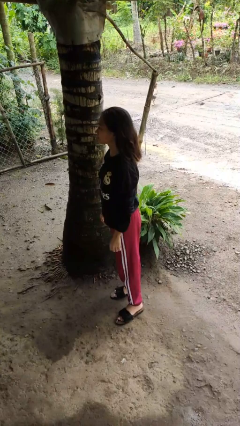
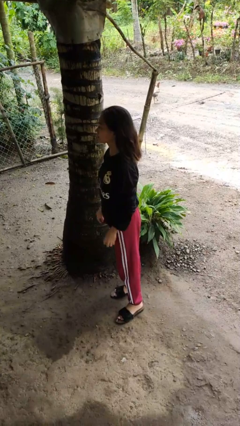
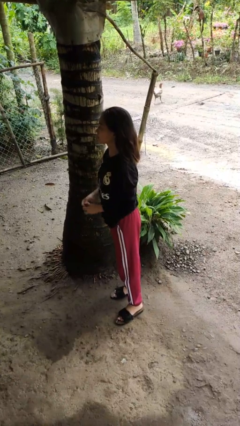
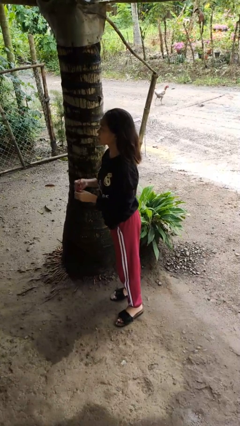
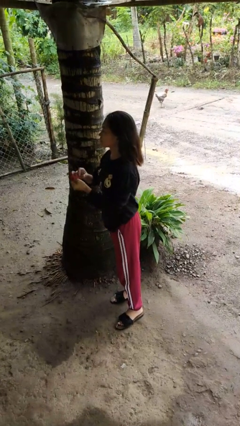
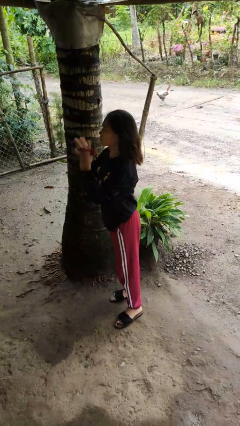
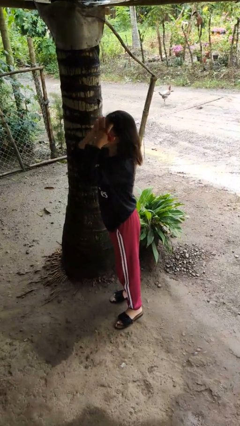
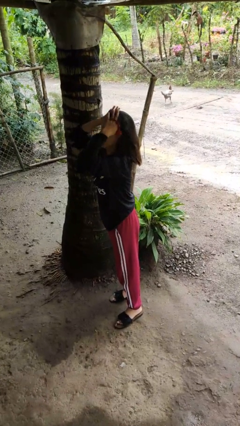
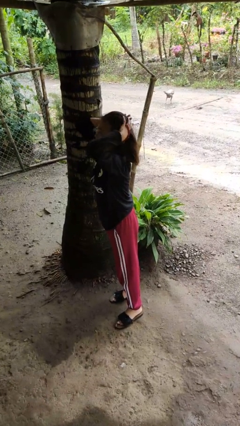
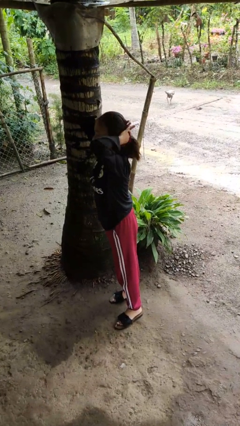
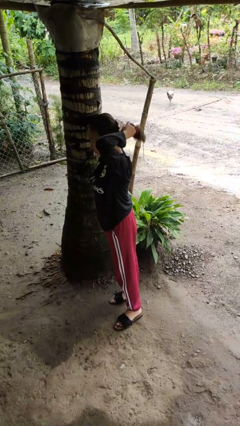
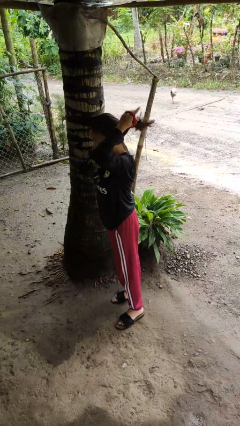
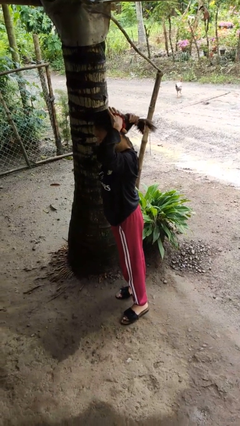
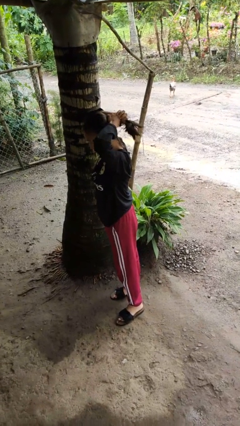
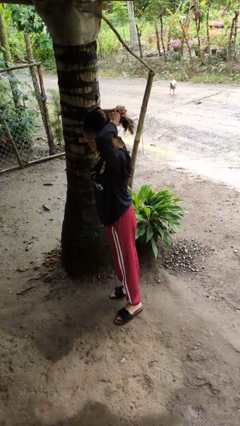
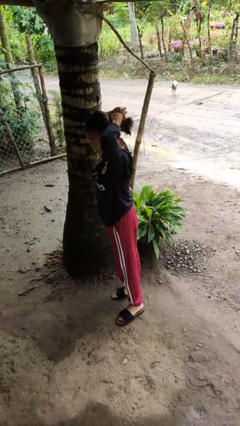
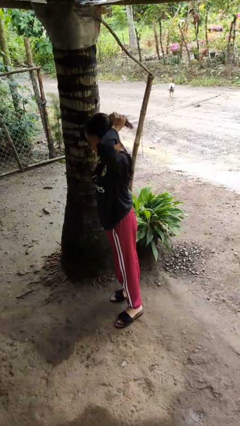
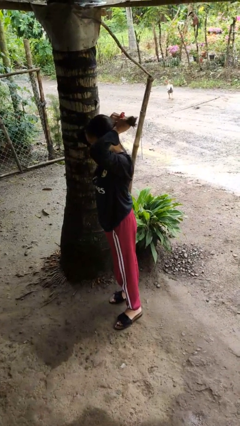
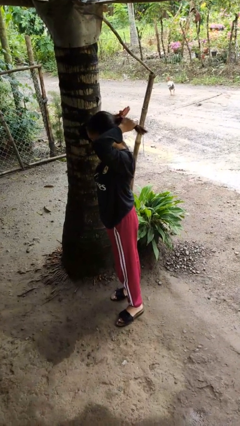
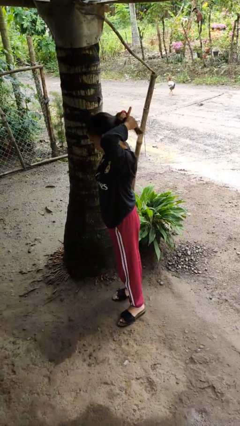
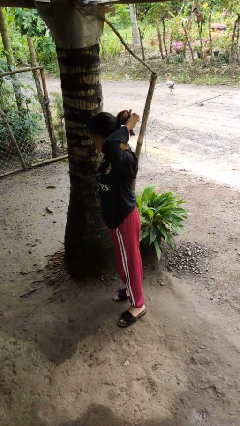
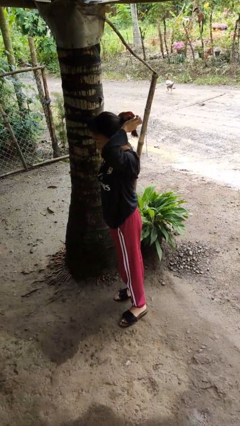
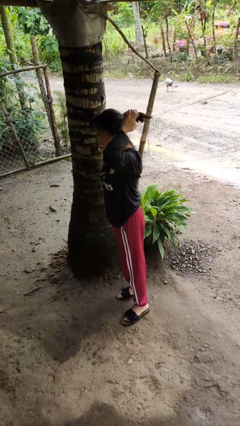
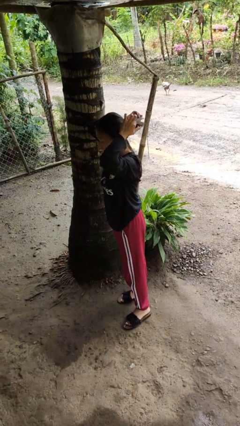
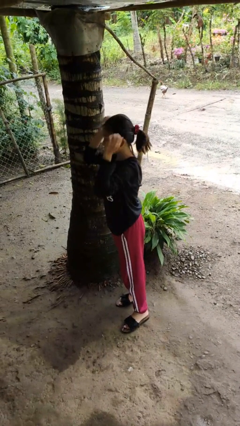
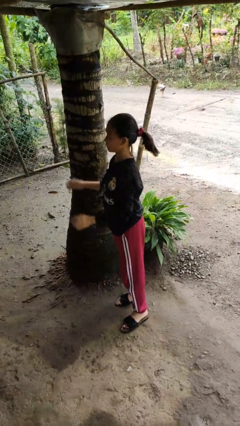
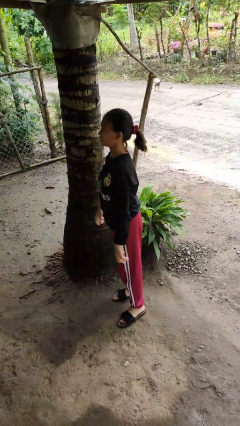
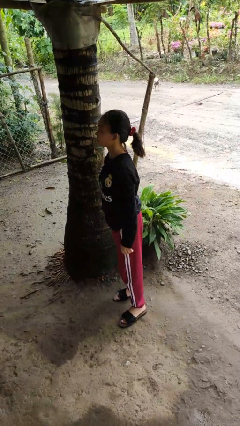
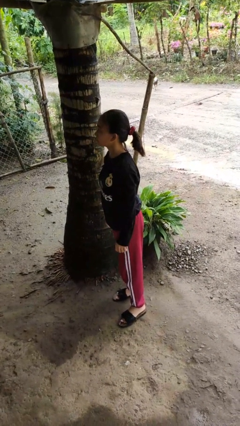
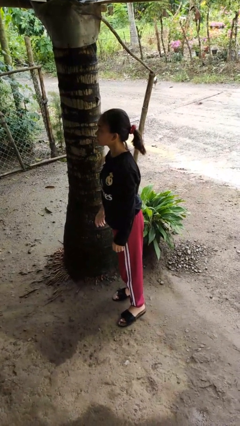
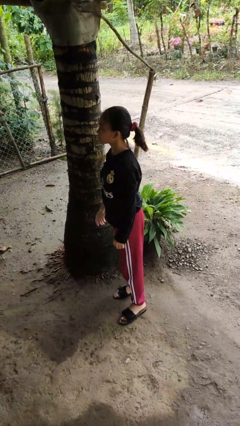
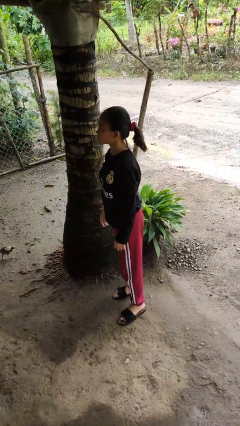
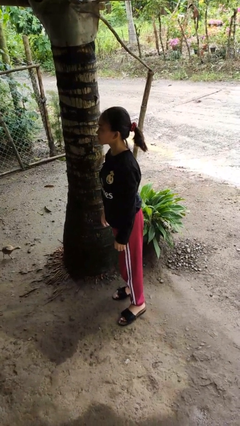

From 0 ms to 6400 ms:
person puts hair in ponytail

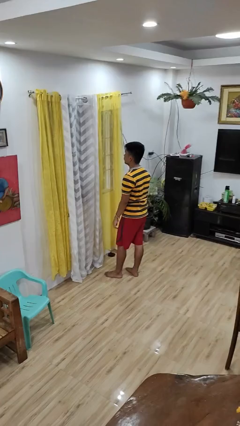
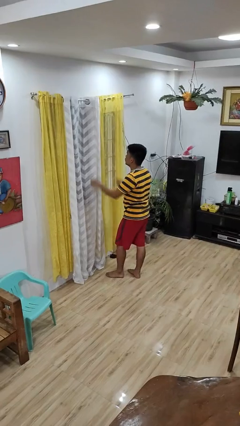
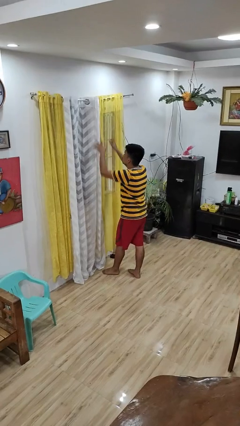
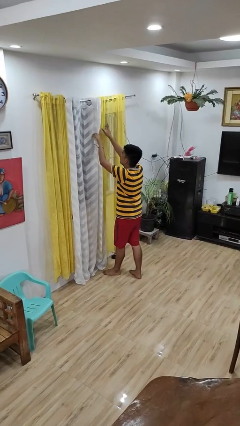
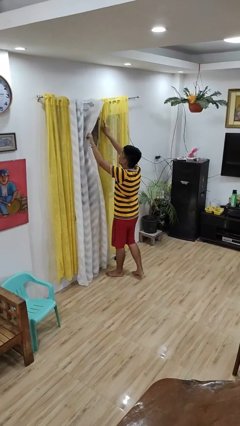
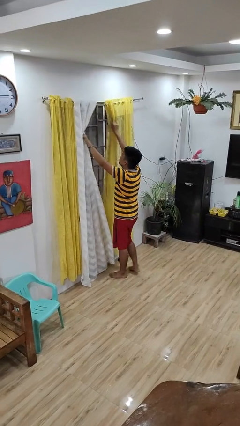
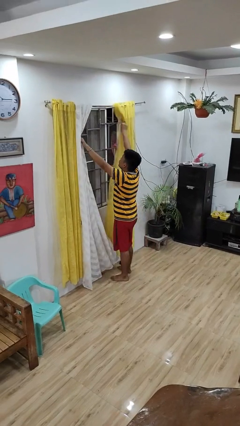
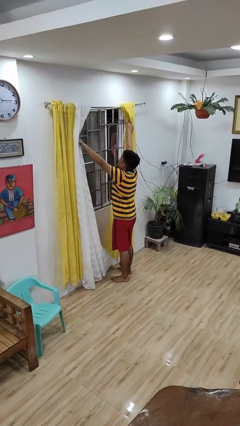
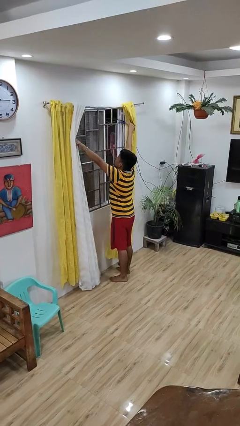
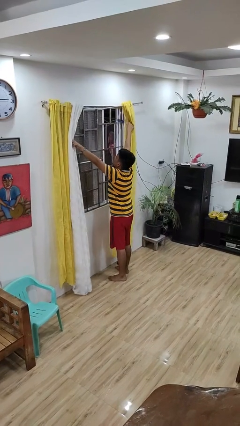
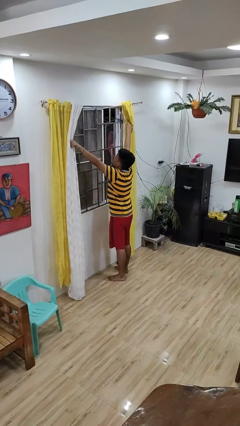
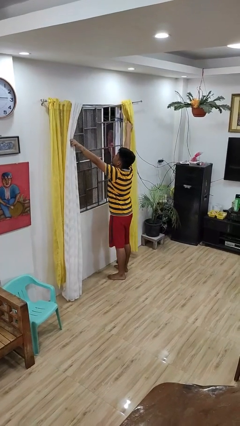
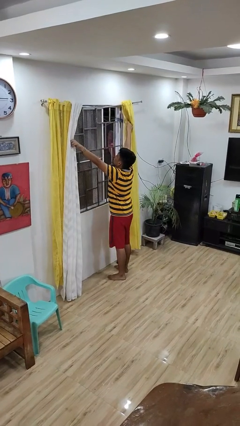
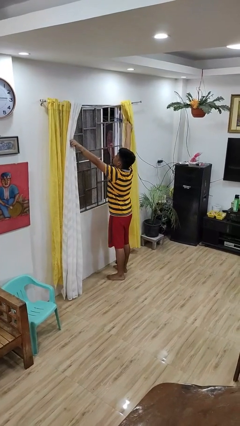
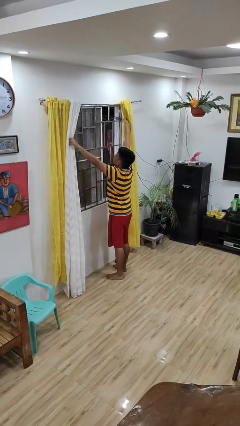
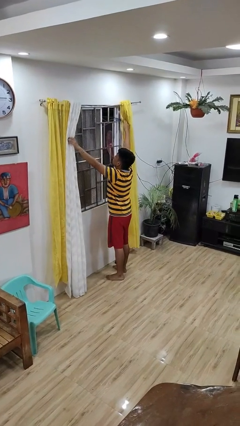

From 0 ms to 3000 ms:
person opens curtains

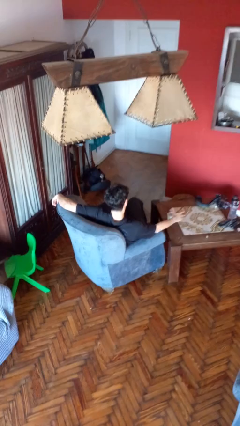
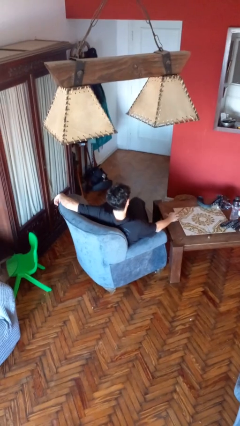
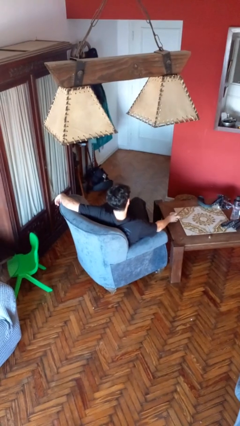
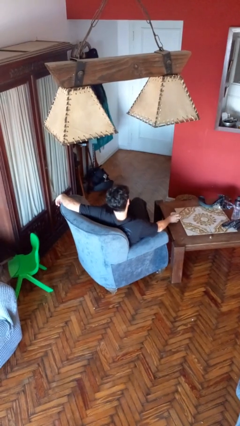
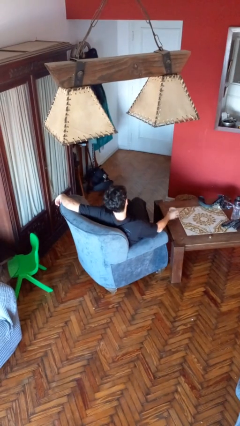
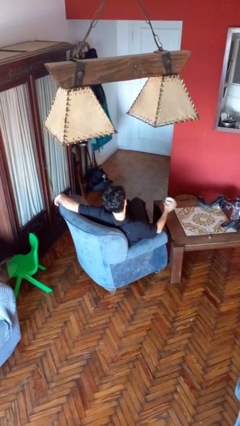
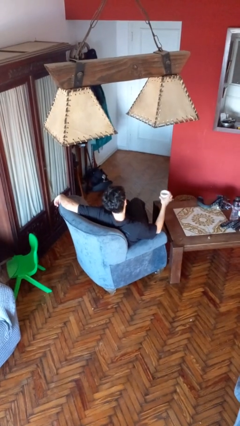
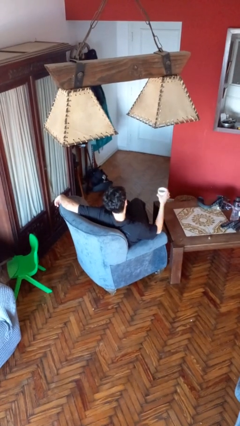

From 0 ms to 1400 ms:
person picks up object from table

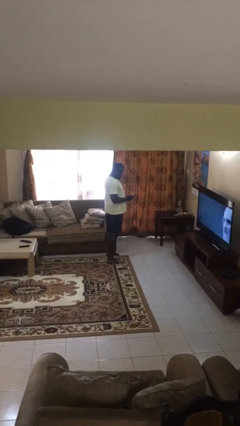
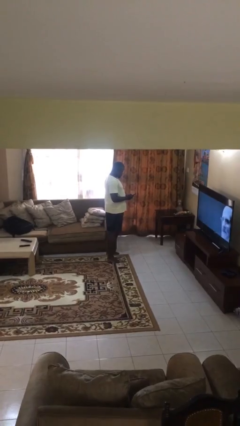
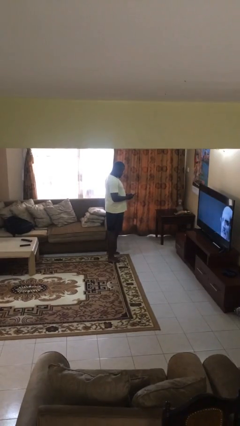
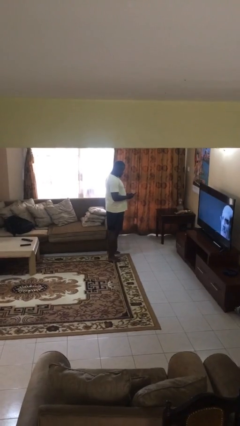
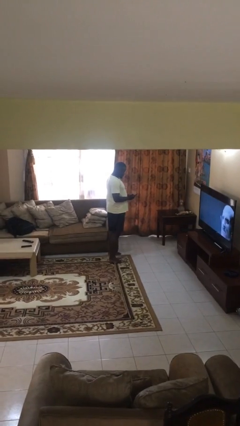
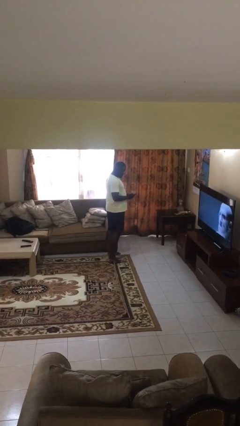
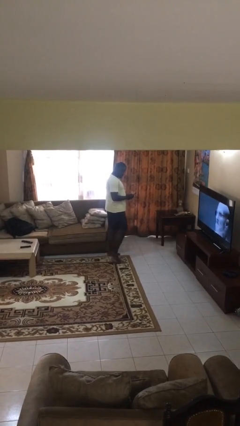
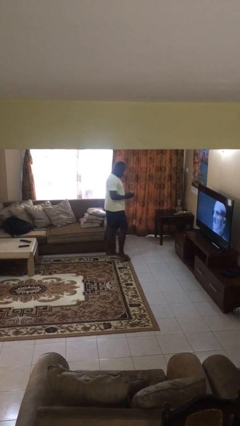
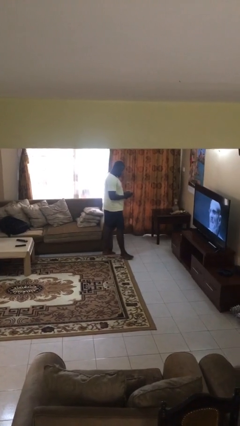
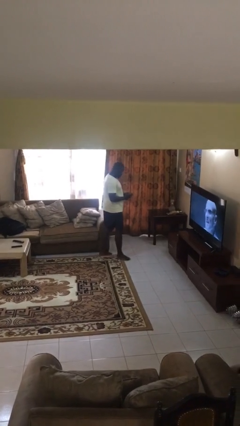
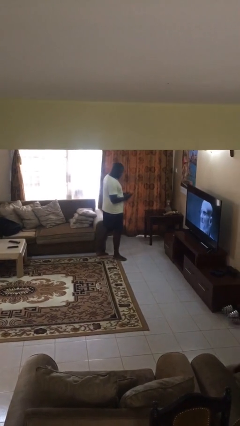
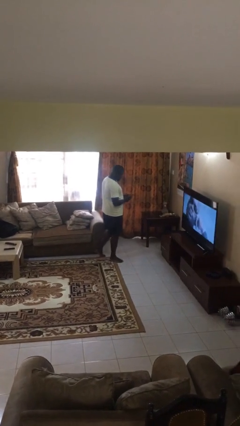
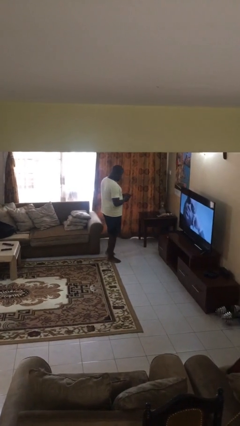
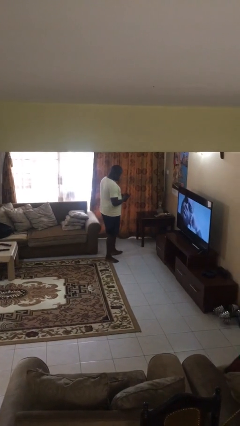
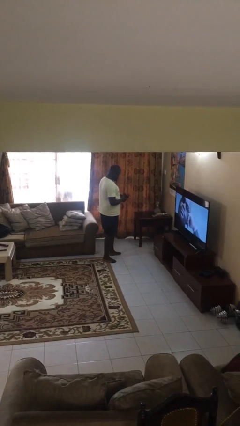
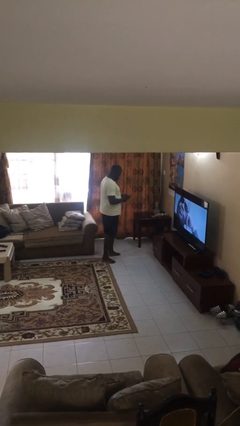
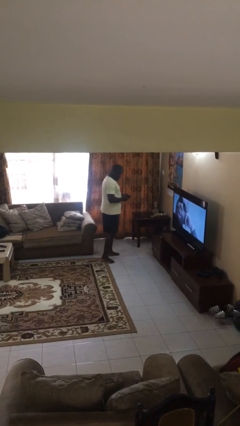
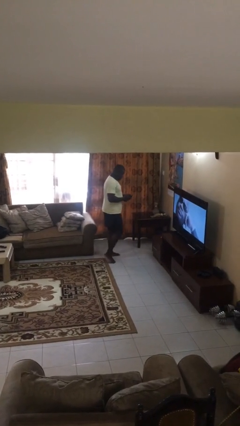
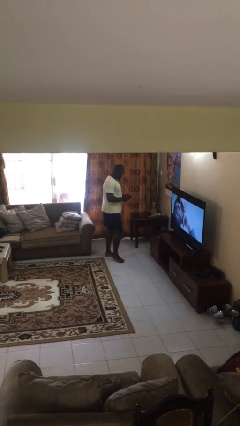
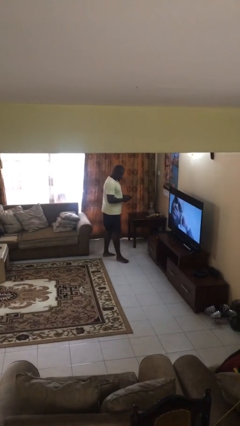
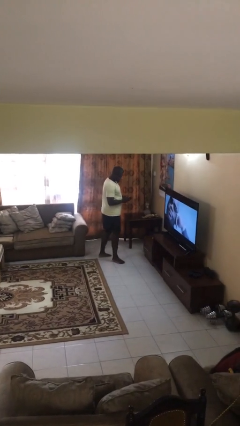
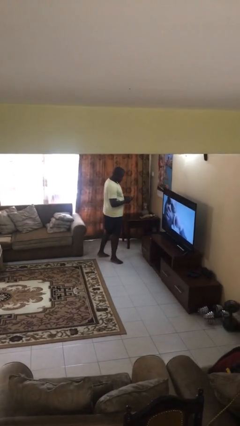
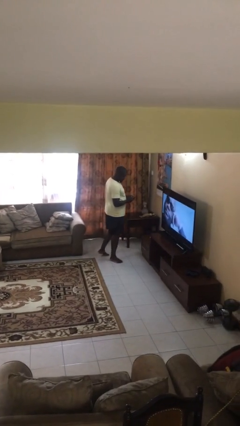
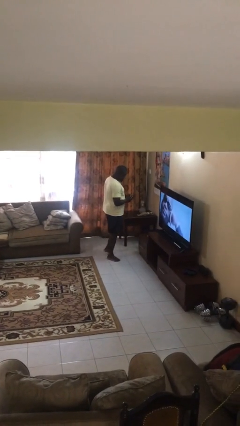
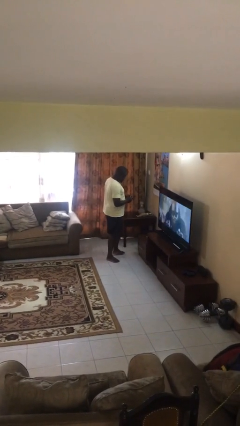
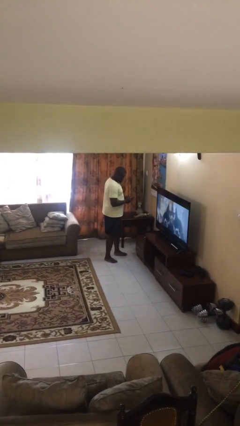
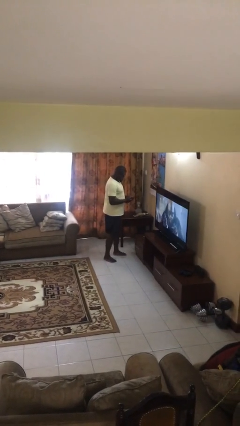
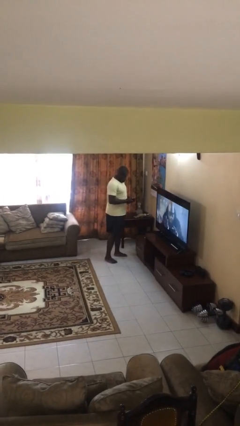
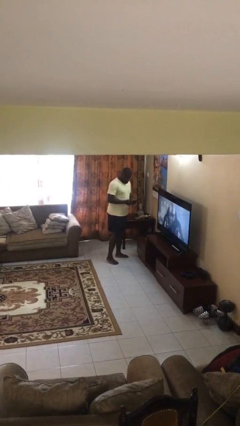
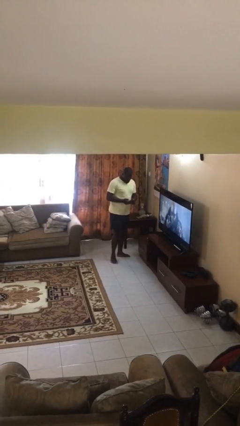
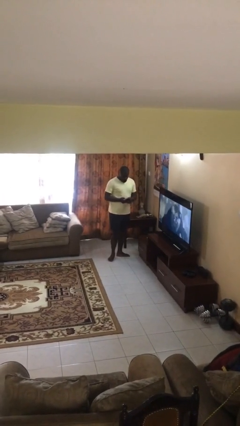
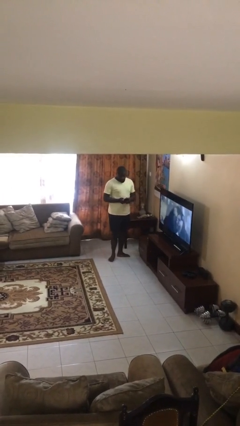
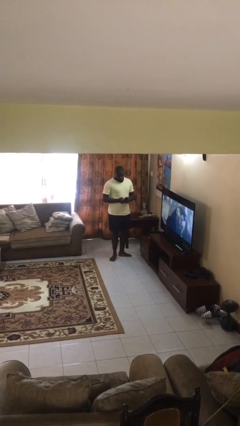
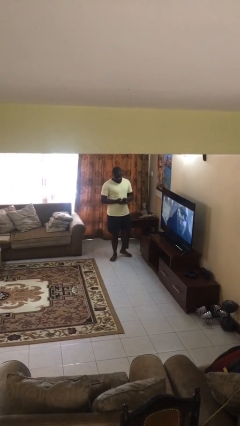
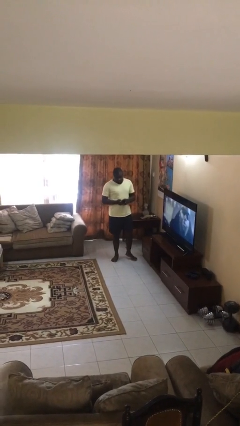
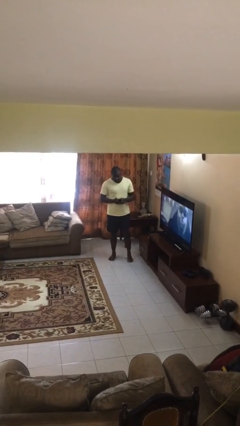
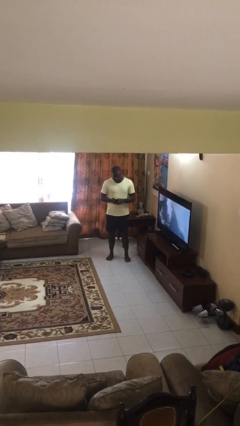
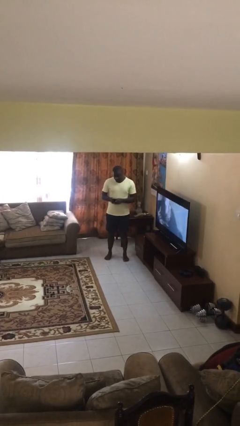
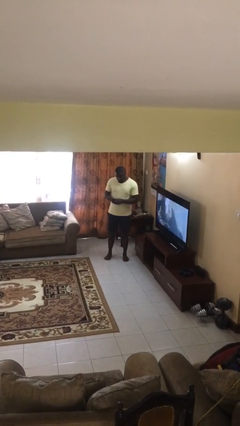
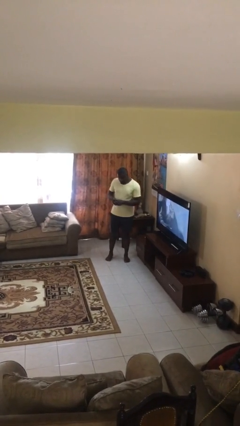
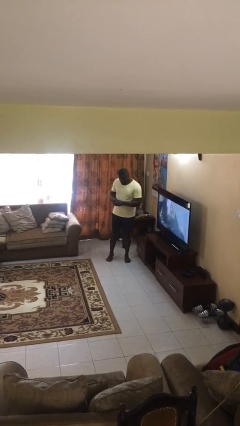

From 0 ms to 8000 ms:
person texts on phone
